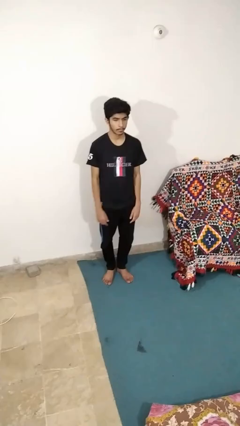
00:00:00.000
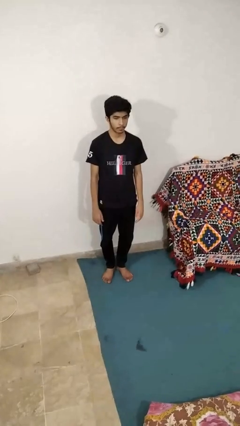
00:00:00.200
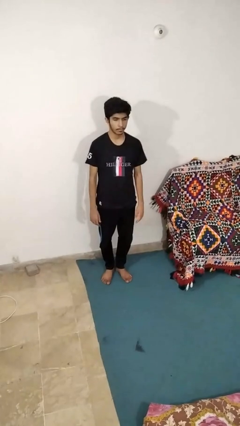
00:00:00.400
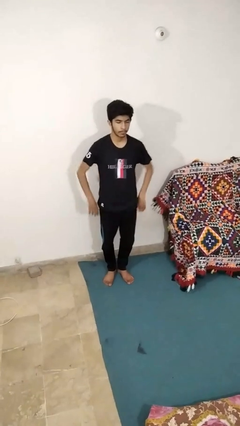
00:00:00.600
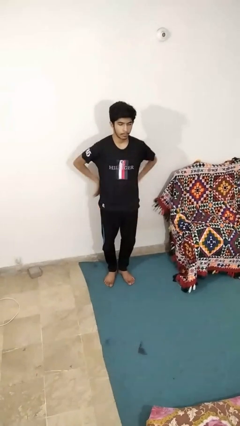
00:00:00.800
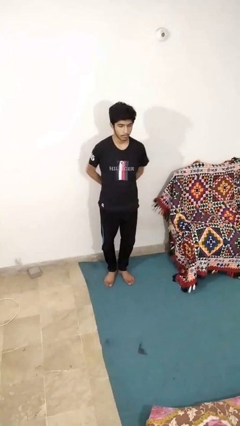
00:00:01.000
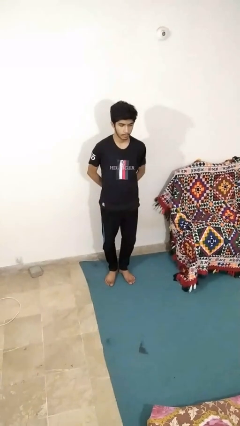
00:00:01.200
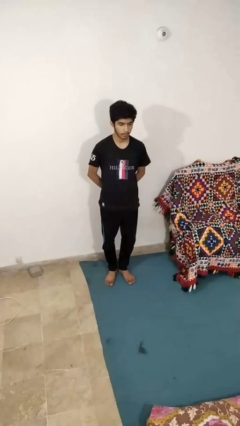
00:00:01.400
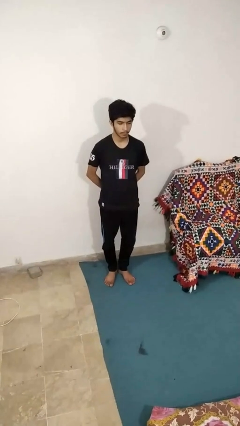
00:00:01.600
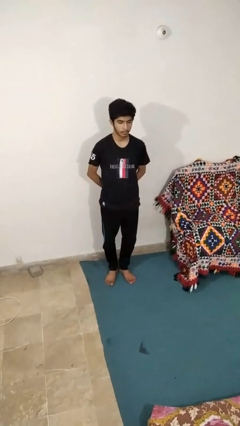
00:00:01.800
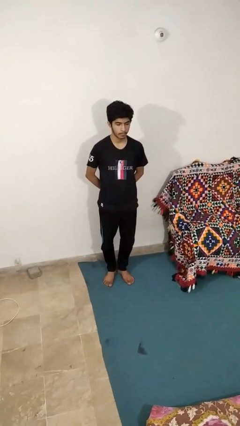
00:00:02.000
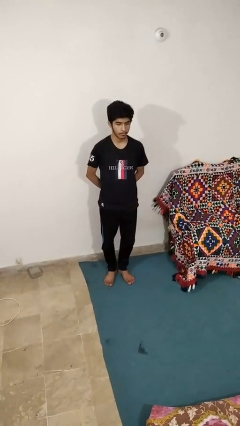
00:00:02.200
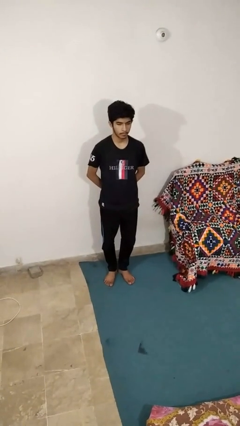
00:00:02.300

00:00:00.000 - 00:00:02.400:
person puts hands in back pockets

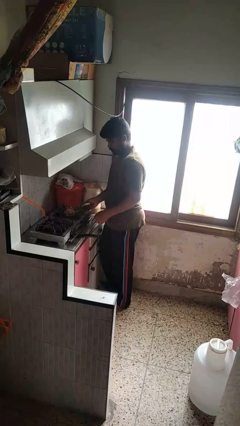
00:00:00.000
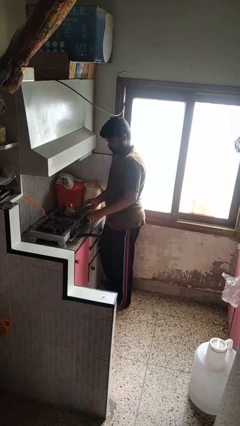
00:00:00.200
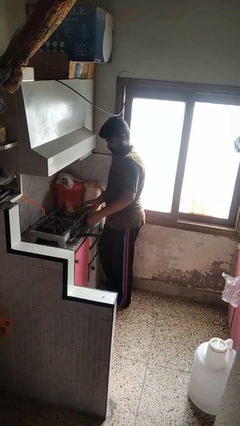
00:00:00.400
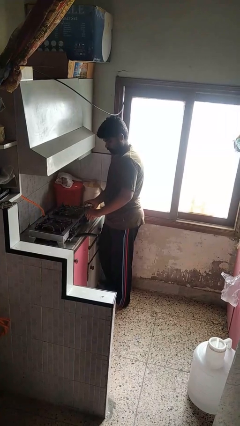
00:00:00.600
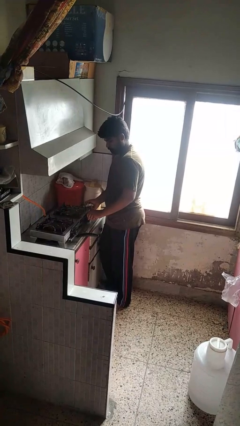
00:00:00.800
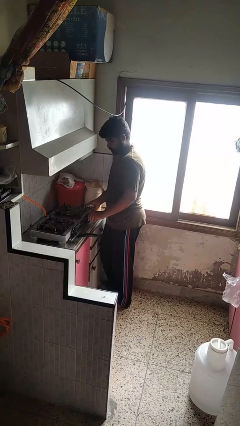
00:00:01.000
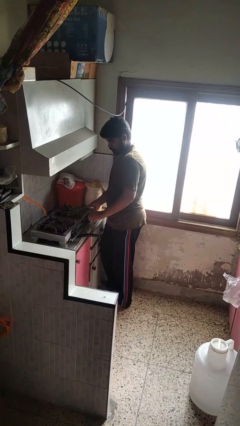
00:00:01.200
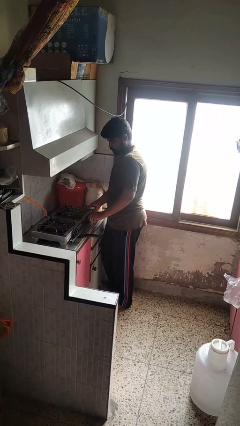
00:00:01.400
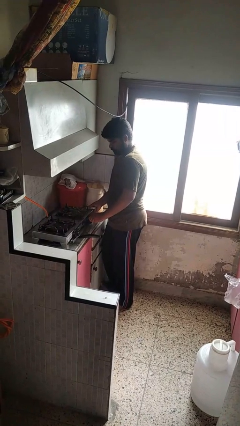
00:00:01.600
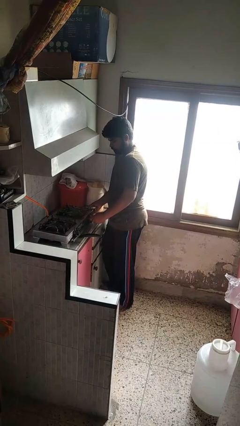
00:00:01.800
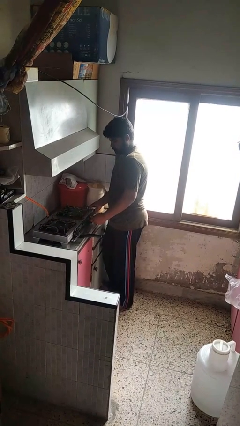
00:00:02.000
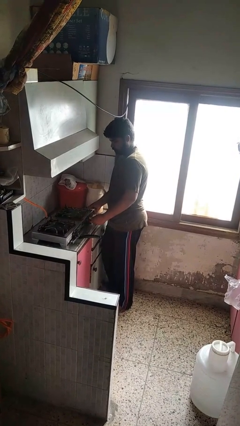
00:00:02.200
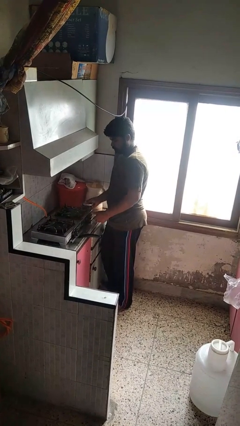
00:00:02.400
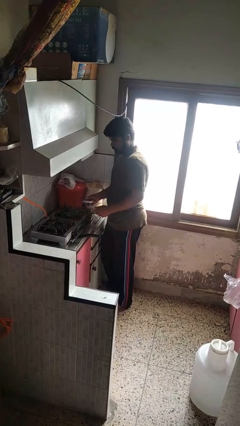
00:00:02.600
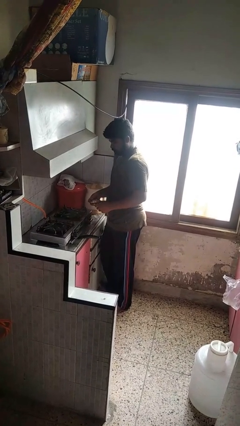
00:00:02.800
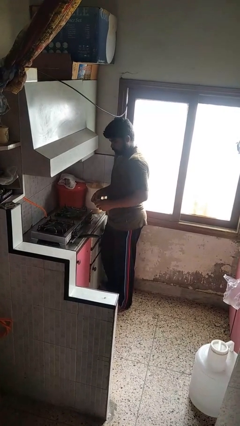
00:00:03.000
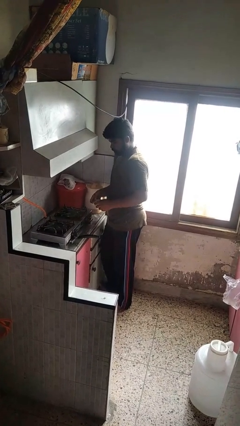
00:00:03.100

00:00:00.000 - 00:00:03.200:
person turns off stovetop

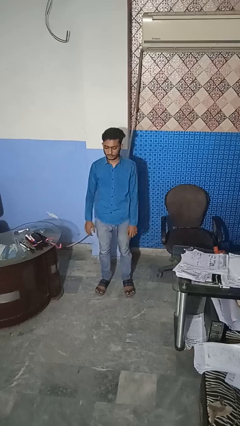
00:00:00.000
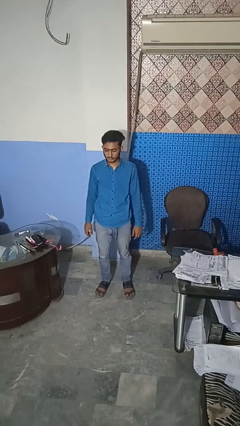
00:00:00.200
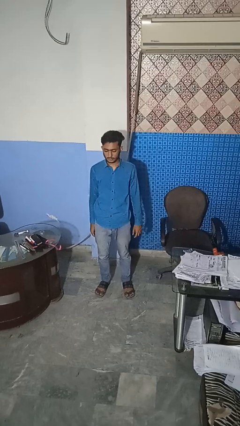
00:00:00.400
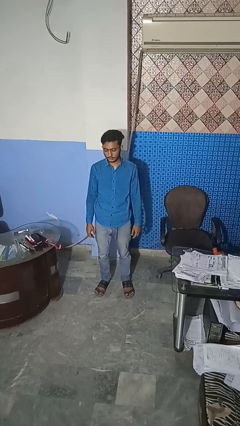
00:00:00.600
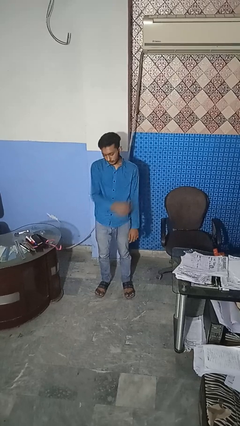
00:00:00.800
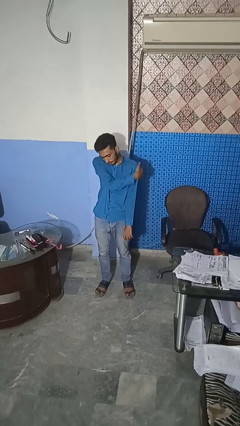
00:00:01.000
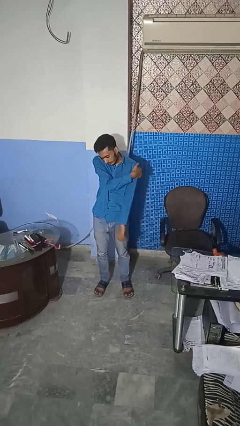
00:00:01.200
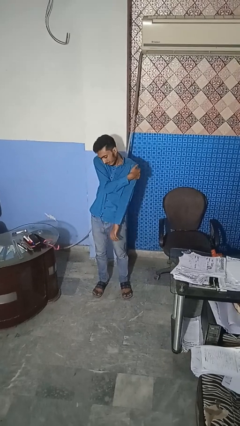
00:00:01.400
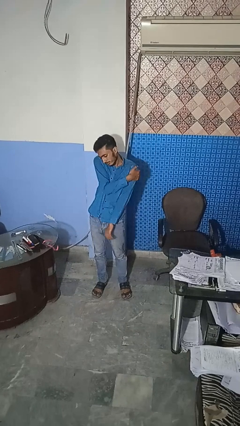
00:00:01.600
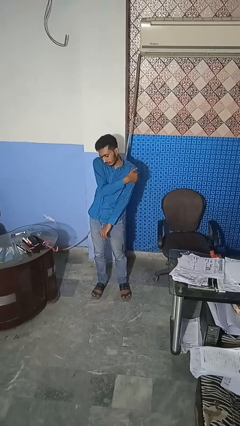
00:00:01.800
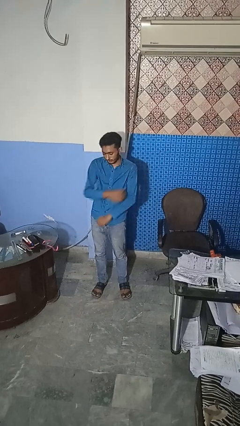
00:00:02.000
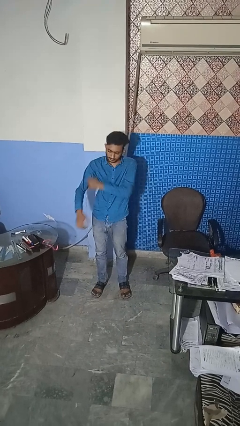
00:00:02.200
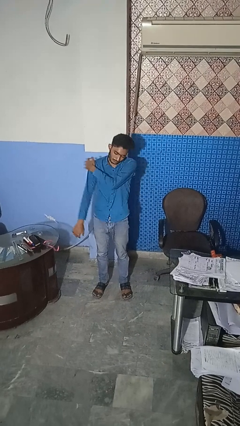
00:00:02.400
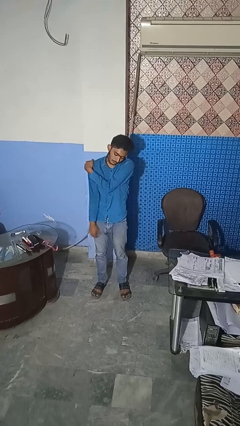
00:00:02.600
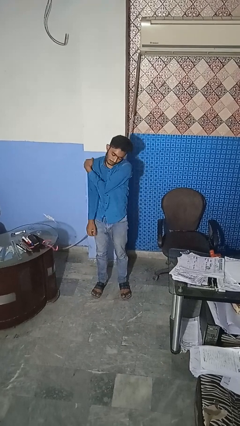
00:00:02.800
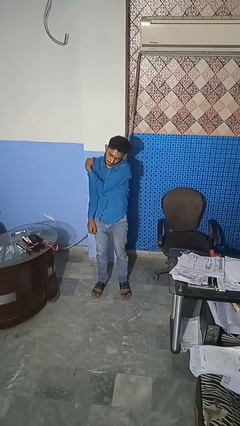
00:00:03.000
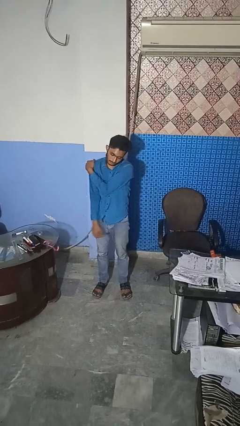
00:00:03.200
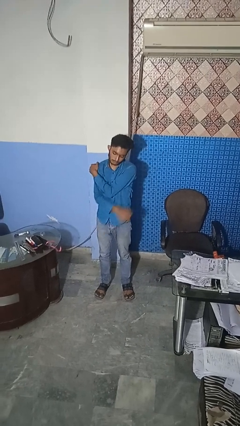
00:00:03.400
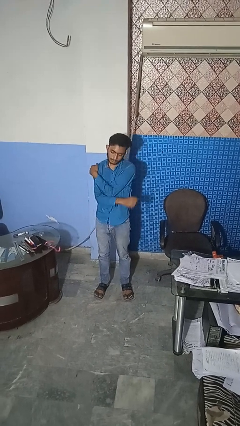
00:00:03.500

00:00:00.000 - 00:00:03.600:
person stretches arms to side

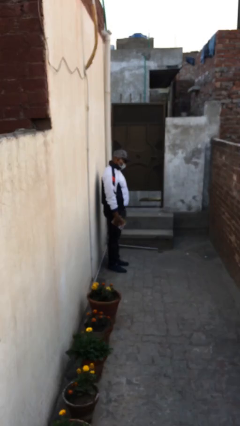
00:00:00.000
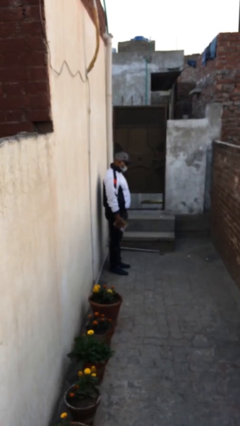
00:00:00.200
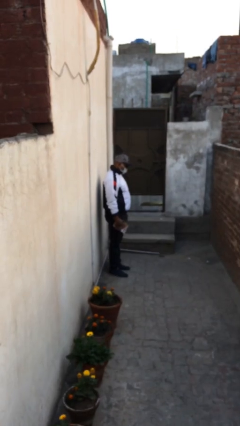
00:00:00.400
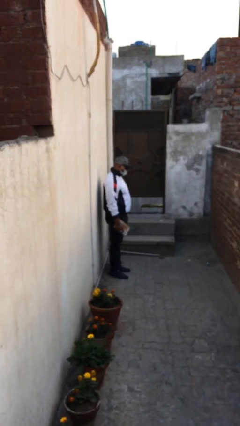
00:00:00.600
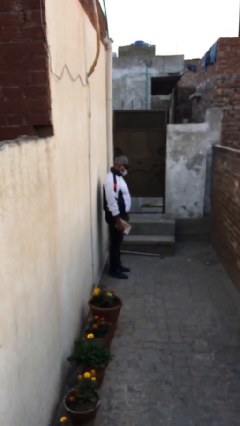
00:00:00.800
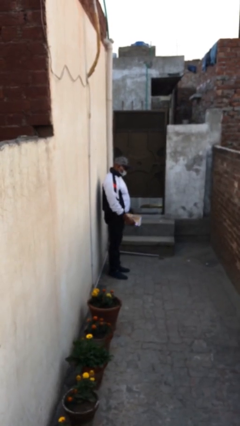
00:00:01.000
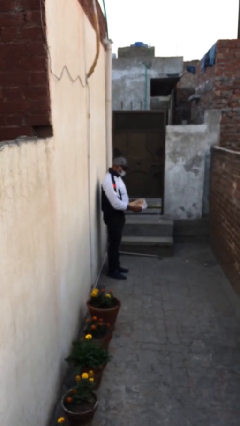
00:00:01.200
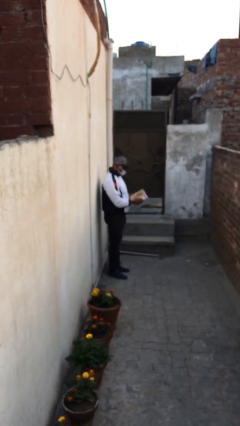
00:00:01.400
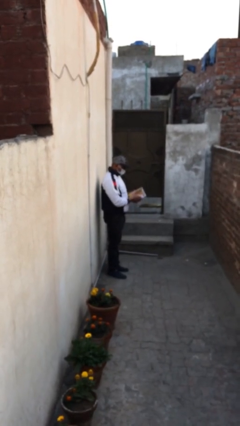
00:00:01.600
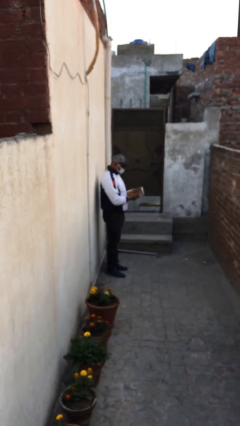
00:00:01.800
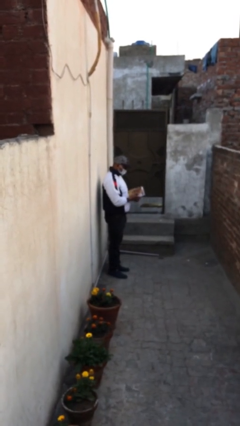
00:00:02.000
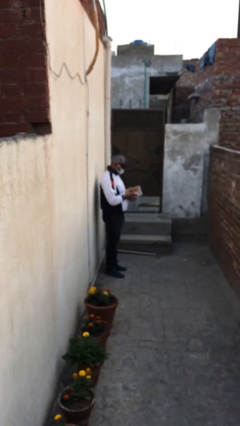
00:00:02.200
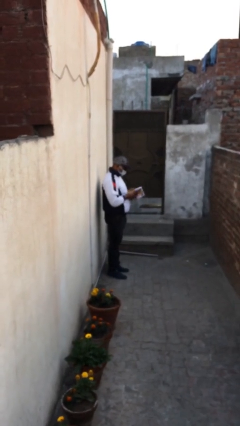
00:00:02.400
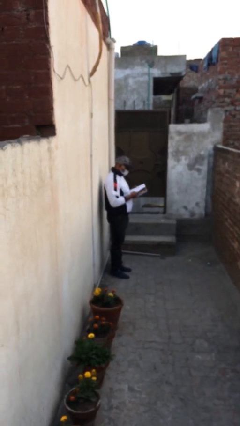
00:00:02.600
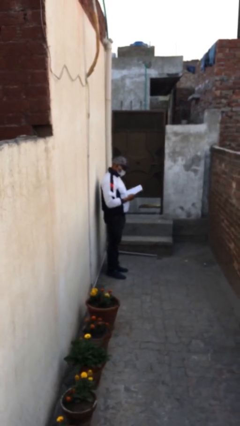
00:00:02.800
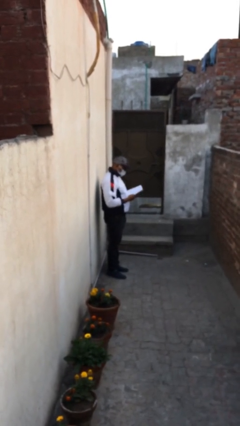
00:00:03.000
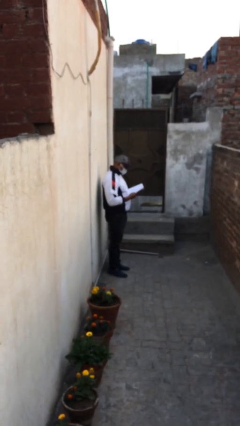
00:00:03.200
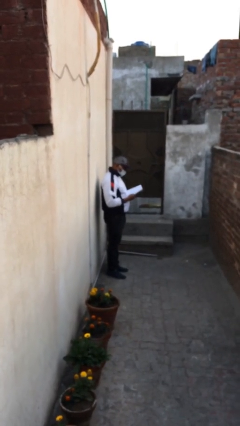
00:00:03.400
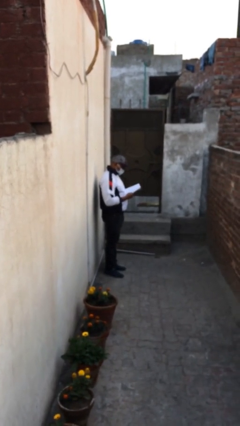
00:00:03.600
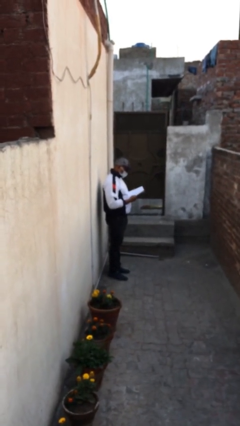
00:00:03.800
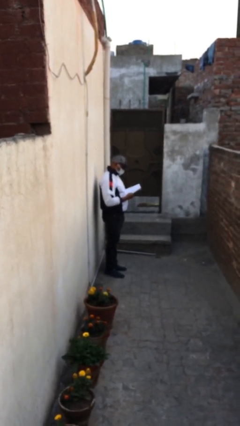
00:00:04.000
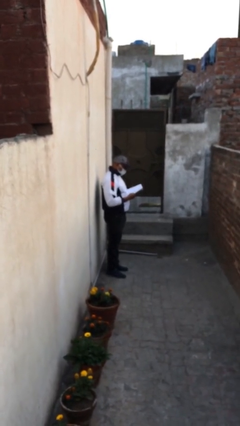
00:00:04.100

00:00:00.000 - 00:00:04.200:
person reads document

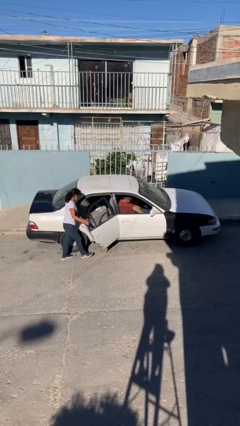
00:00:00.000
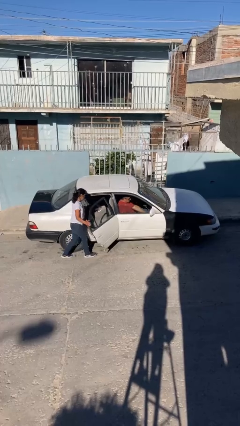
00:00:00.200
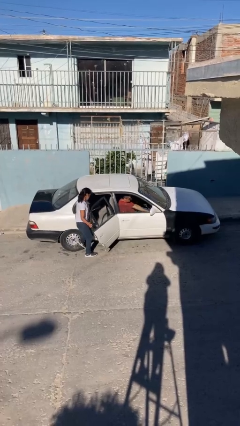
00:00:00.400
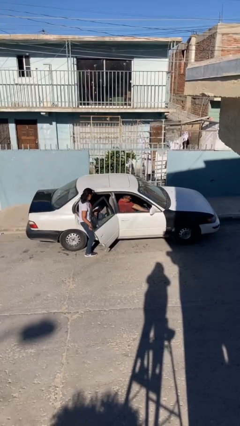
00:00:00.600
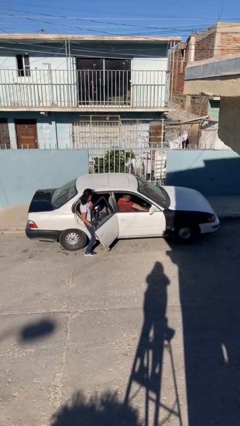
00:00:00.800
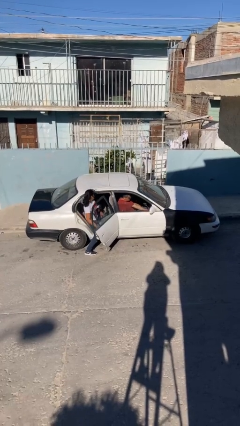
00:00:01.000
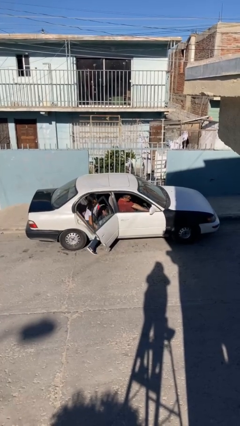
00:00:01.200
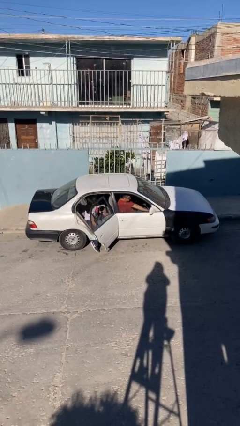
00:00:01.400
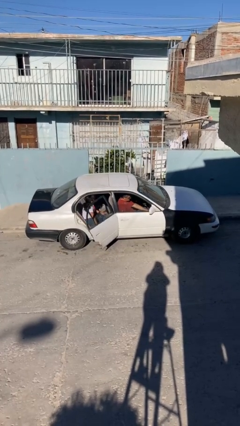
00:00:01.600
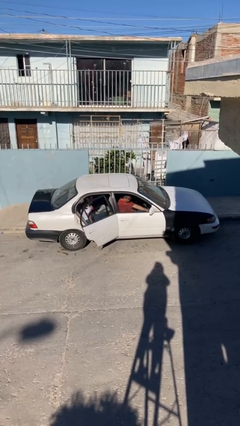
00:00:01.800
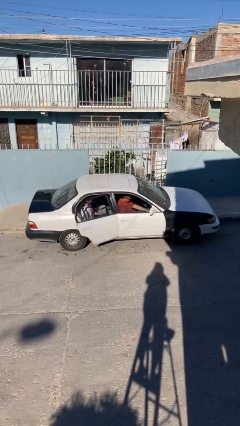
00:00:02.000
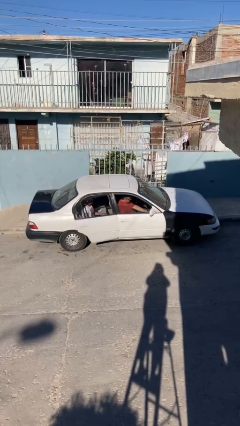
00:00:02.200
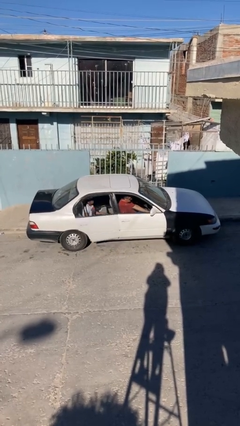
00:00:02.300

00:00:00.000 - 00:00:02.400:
car picks up person

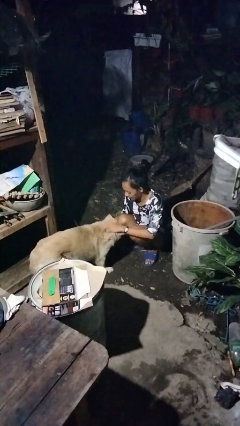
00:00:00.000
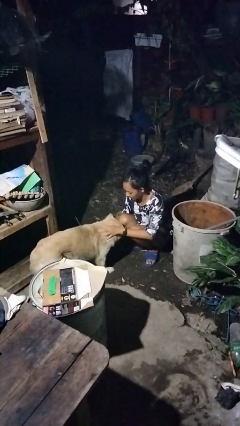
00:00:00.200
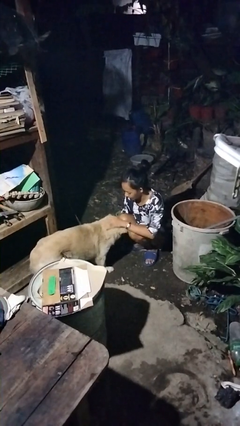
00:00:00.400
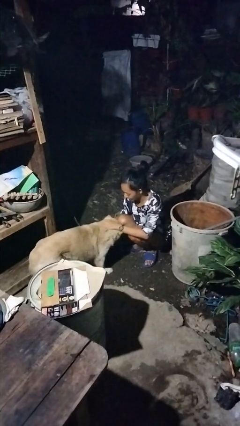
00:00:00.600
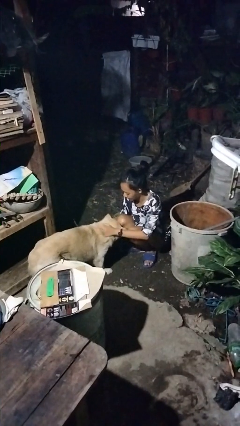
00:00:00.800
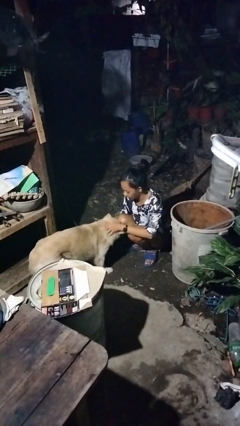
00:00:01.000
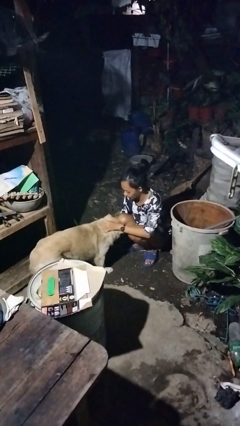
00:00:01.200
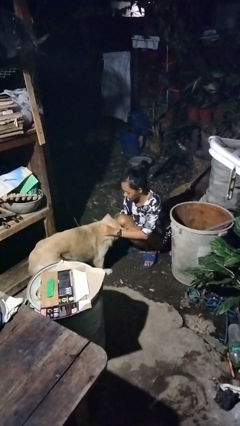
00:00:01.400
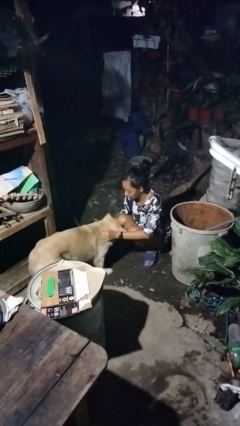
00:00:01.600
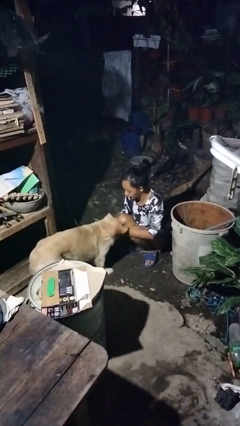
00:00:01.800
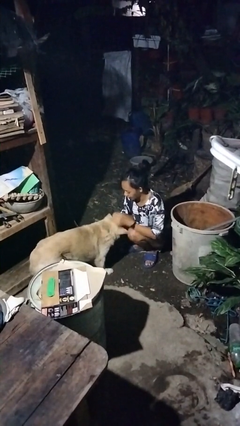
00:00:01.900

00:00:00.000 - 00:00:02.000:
person pets dog
